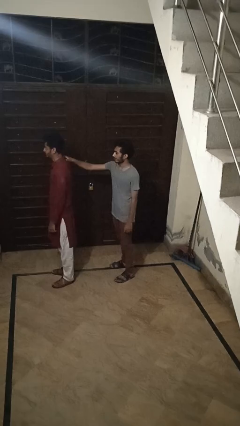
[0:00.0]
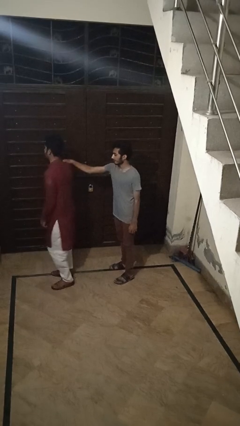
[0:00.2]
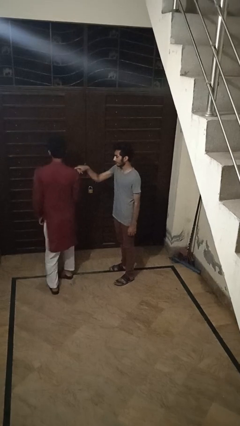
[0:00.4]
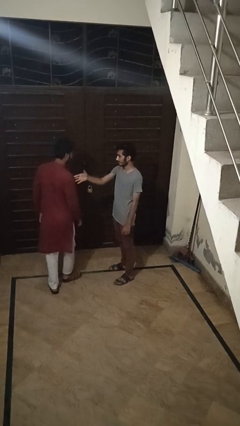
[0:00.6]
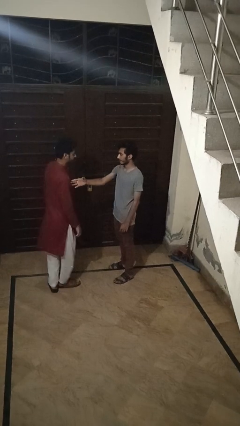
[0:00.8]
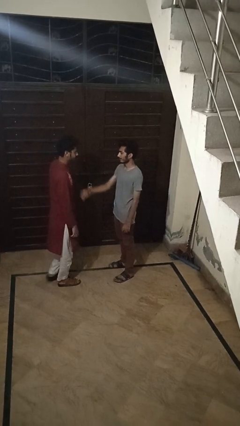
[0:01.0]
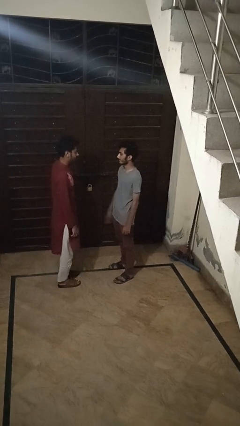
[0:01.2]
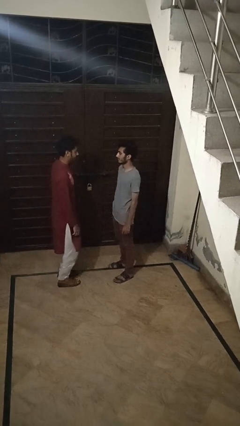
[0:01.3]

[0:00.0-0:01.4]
person spins person around

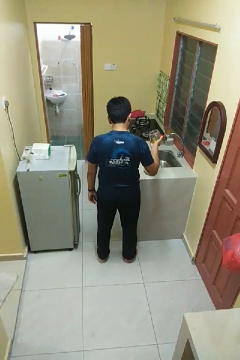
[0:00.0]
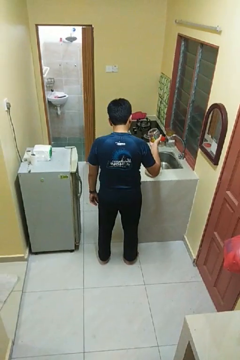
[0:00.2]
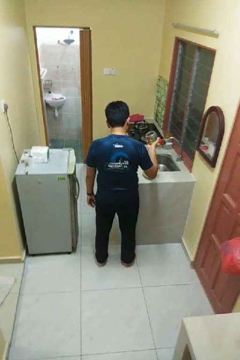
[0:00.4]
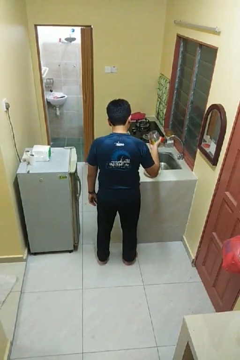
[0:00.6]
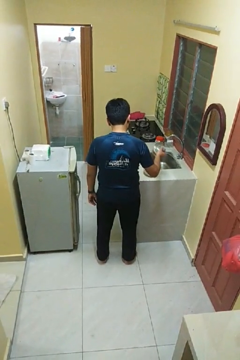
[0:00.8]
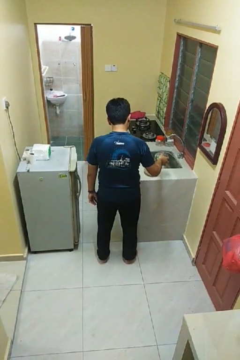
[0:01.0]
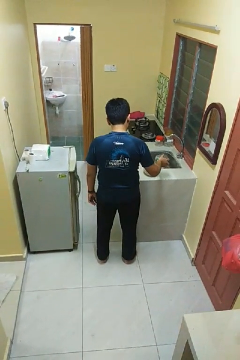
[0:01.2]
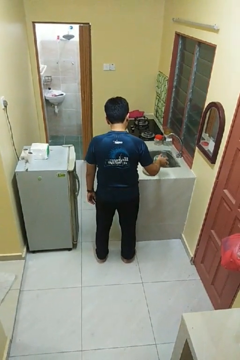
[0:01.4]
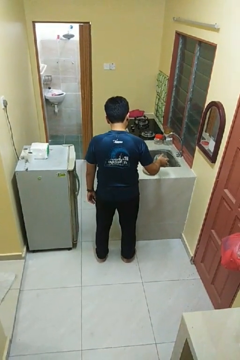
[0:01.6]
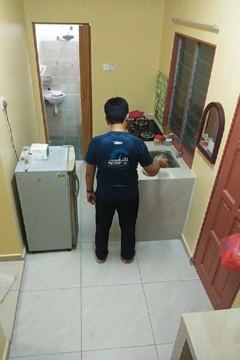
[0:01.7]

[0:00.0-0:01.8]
person pours into bowl

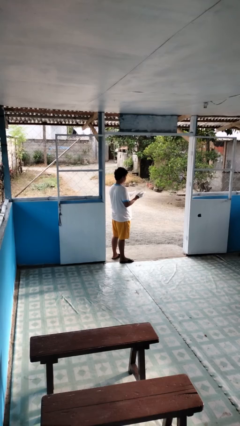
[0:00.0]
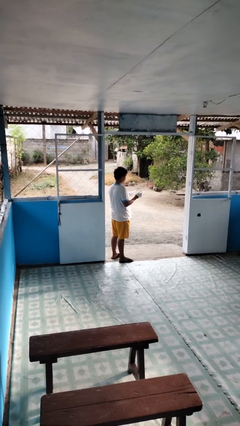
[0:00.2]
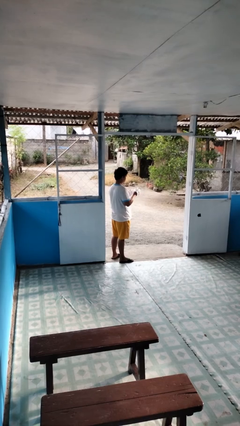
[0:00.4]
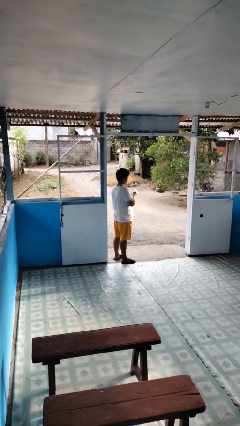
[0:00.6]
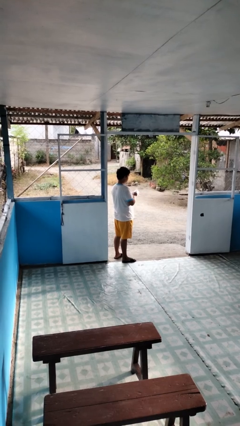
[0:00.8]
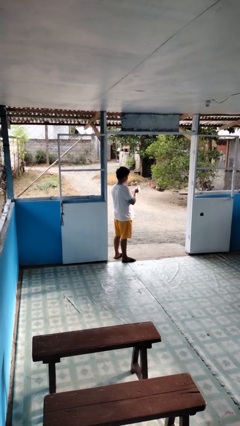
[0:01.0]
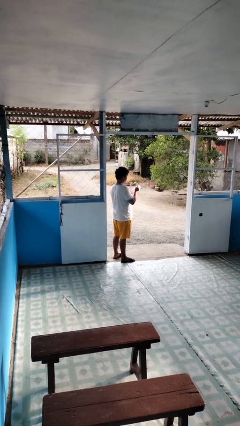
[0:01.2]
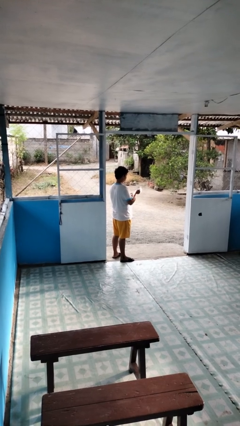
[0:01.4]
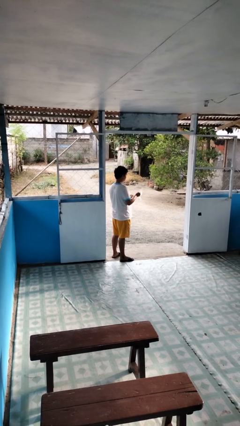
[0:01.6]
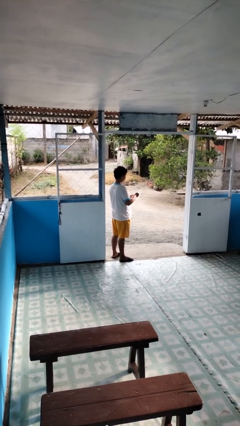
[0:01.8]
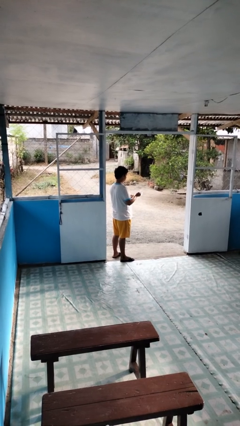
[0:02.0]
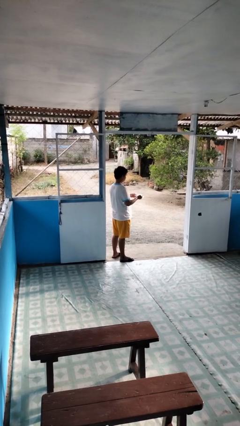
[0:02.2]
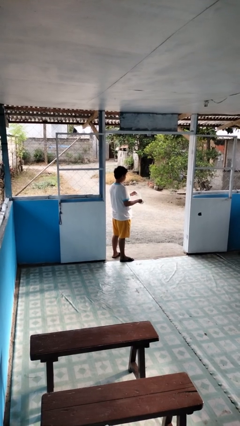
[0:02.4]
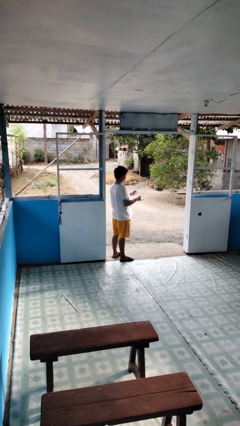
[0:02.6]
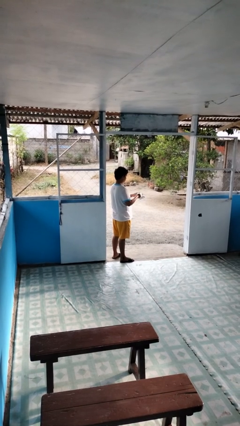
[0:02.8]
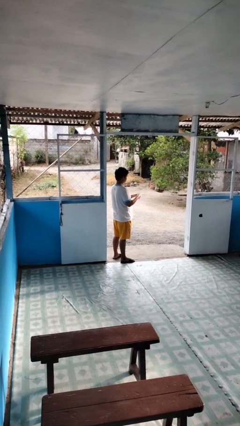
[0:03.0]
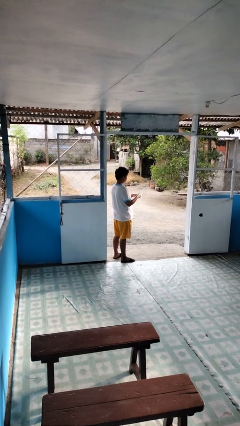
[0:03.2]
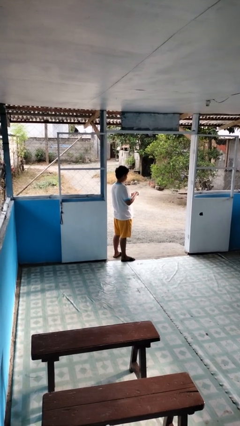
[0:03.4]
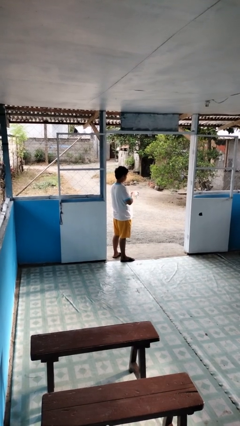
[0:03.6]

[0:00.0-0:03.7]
person takes off gloves

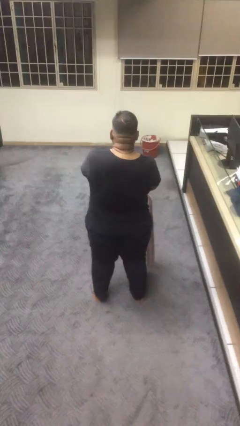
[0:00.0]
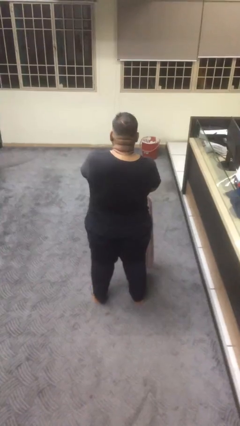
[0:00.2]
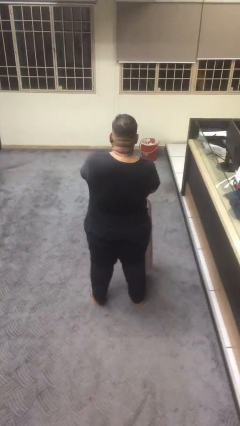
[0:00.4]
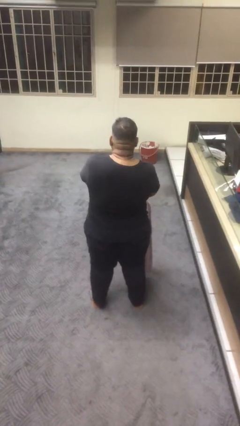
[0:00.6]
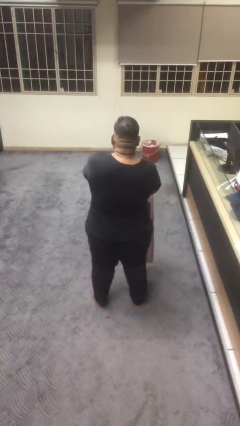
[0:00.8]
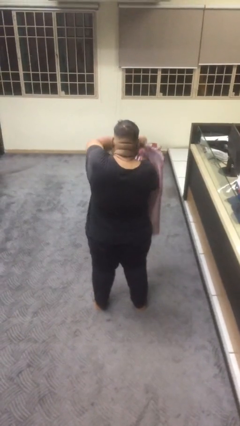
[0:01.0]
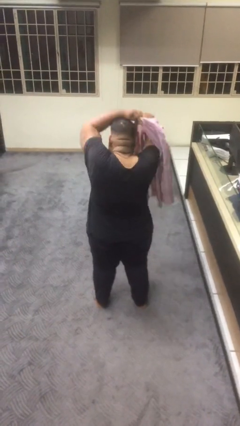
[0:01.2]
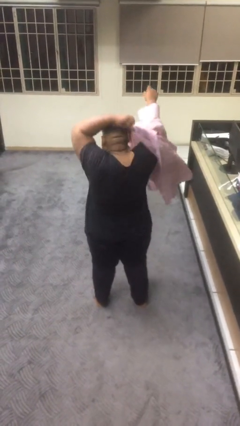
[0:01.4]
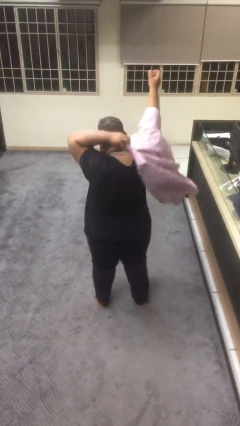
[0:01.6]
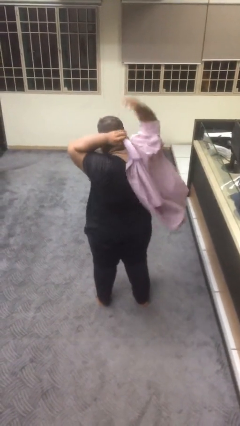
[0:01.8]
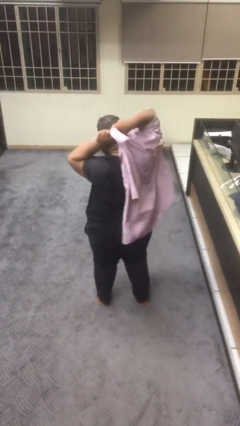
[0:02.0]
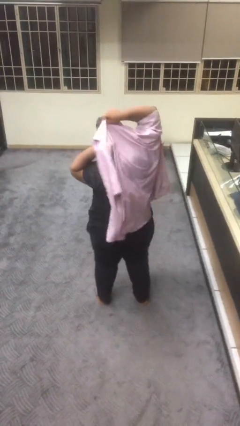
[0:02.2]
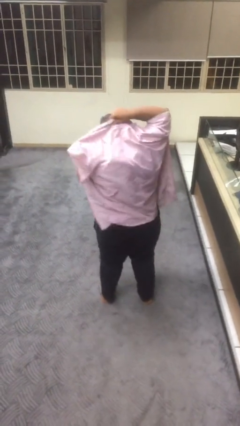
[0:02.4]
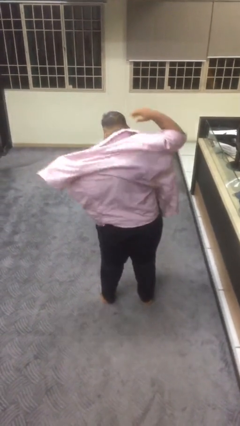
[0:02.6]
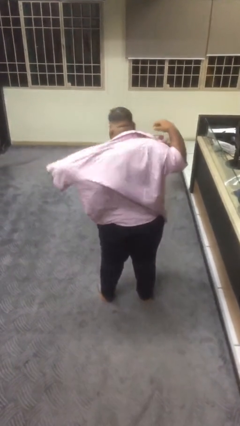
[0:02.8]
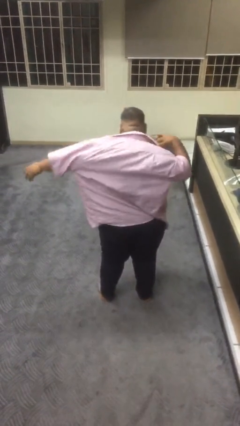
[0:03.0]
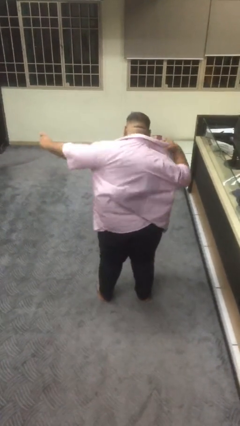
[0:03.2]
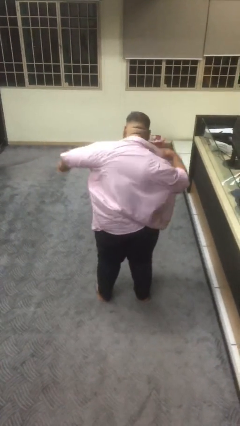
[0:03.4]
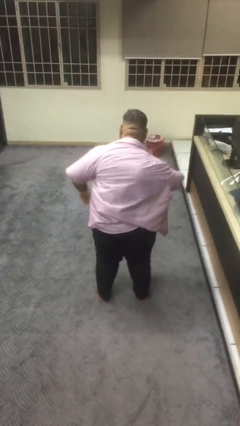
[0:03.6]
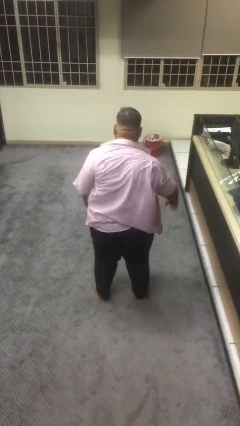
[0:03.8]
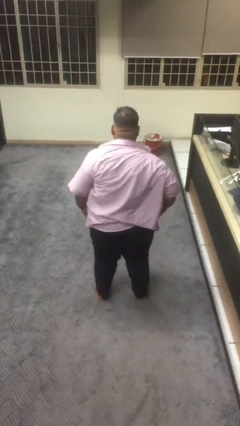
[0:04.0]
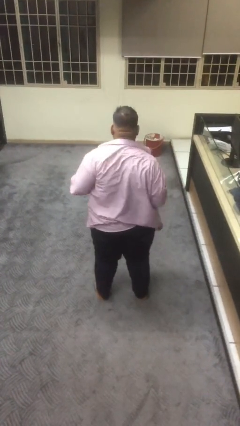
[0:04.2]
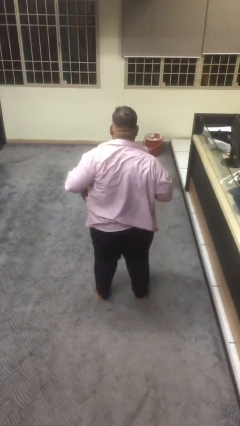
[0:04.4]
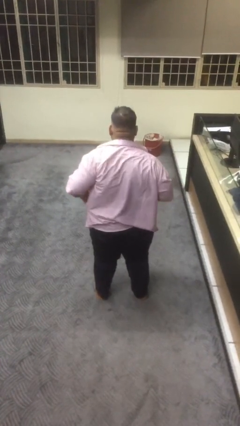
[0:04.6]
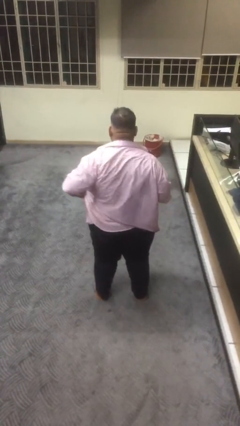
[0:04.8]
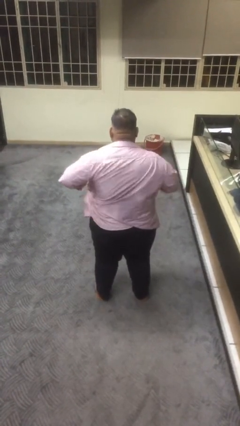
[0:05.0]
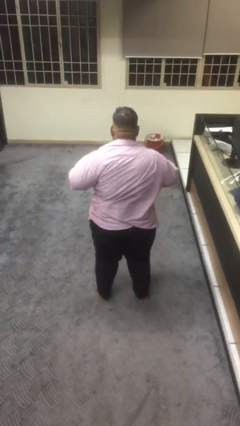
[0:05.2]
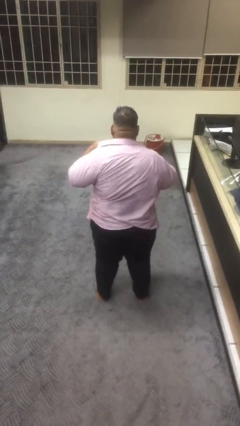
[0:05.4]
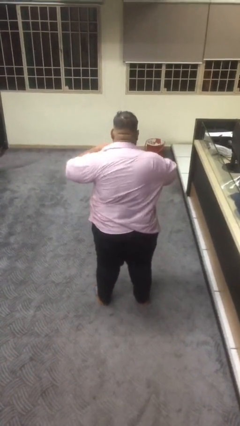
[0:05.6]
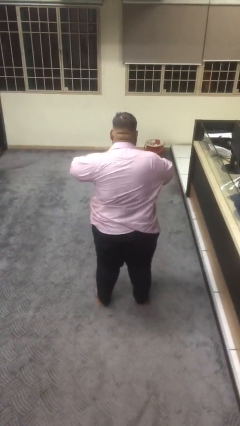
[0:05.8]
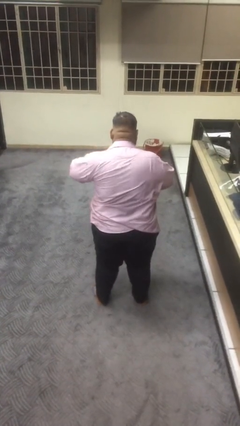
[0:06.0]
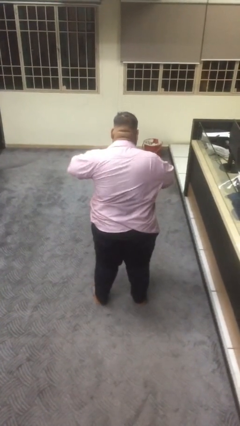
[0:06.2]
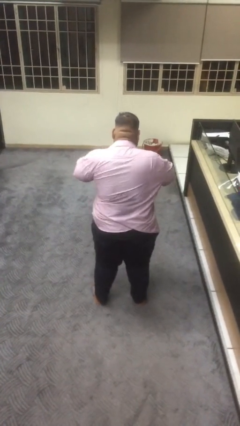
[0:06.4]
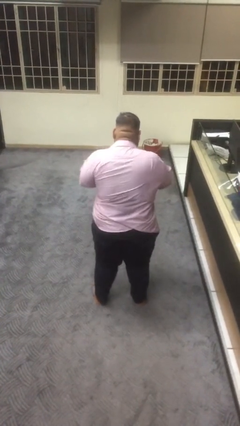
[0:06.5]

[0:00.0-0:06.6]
person puts on shirt

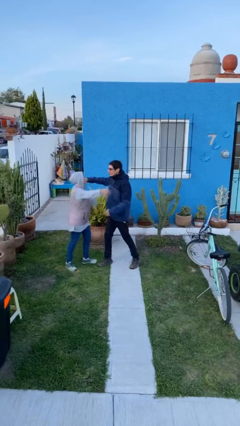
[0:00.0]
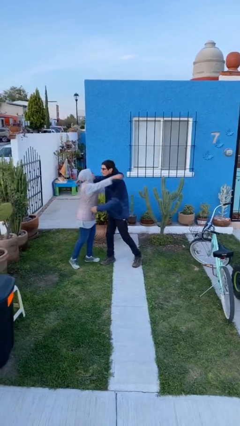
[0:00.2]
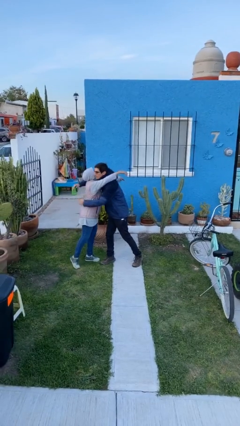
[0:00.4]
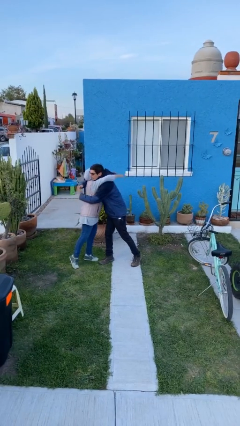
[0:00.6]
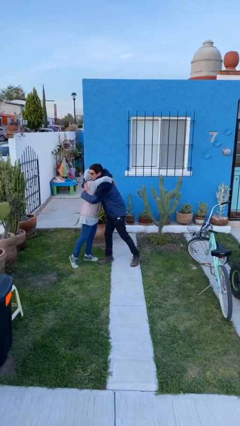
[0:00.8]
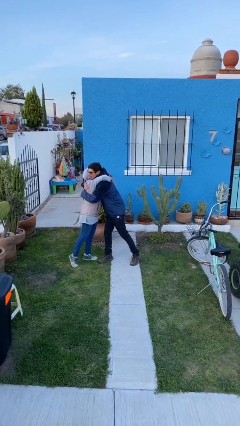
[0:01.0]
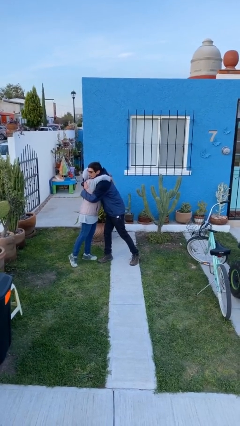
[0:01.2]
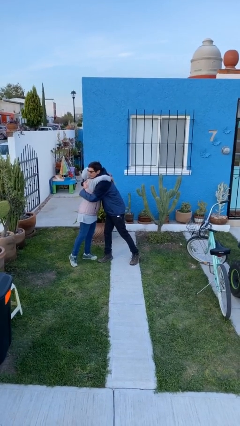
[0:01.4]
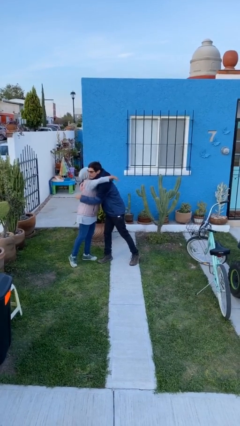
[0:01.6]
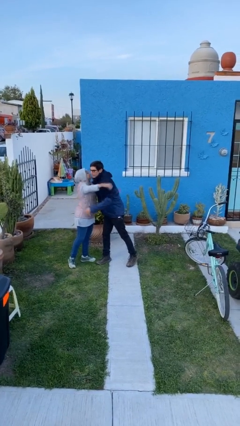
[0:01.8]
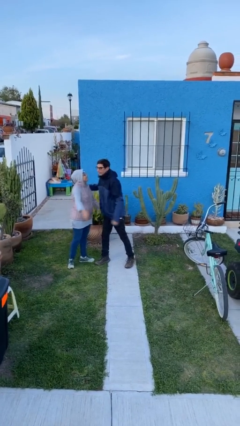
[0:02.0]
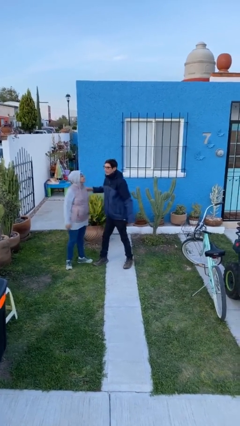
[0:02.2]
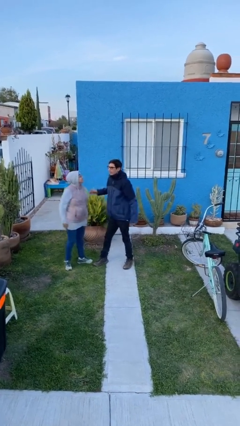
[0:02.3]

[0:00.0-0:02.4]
person embraces person

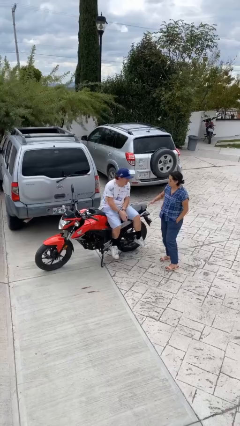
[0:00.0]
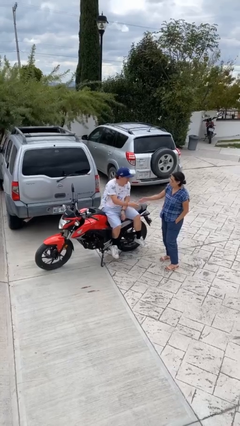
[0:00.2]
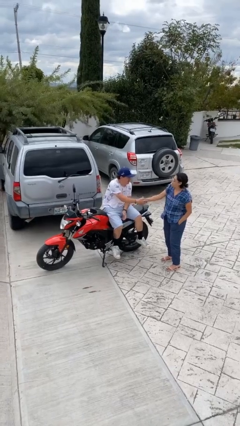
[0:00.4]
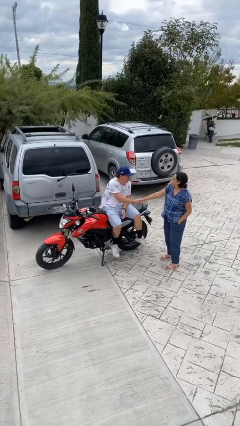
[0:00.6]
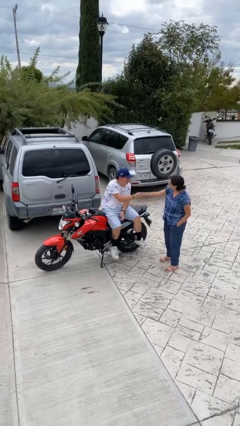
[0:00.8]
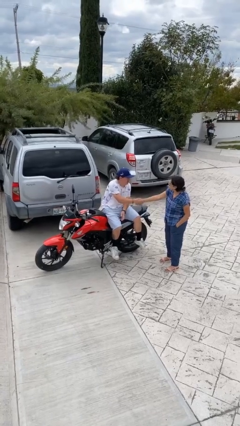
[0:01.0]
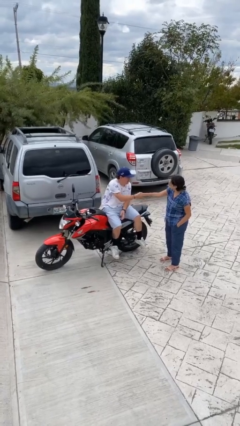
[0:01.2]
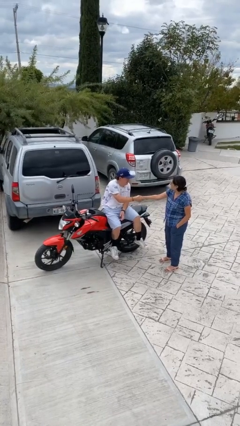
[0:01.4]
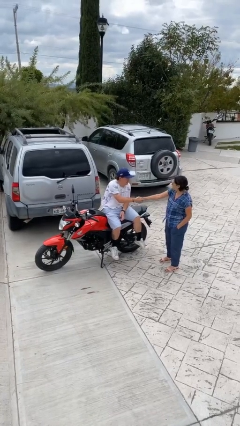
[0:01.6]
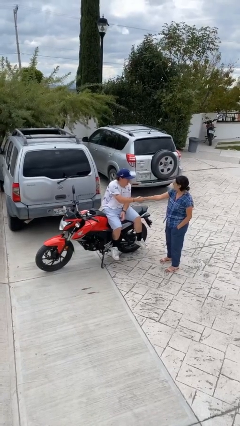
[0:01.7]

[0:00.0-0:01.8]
person shakes hand
